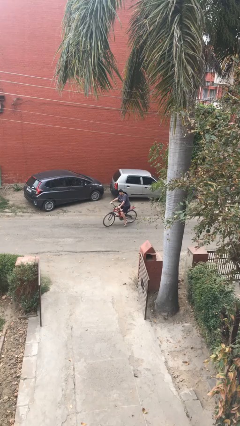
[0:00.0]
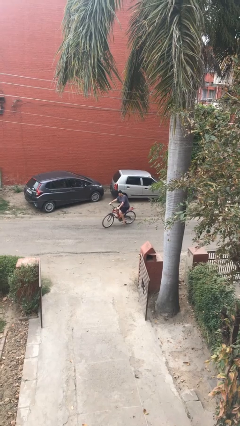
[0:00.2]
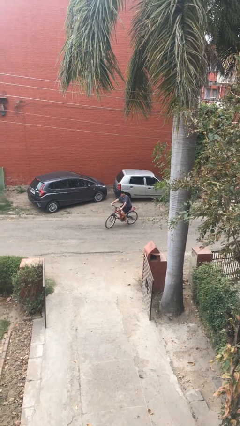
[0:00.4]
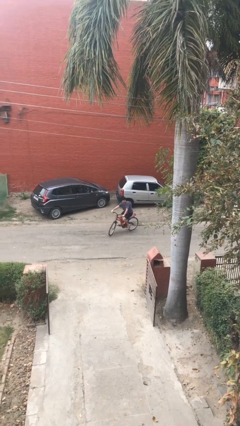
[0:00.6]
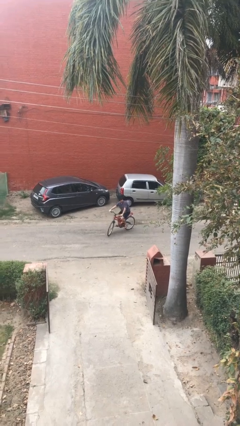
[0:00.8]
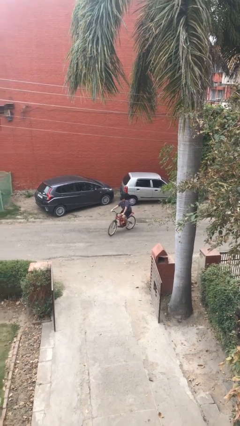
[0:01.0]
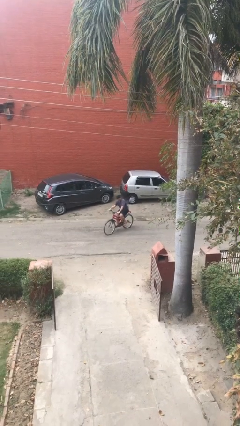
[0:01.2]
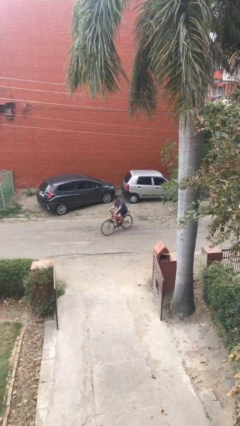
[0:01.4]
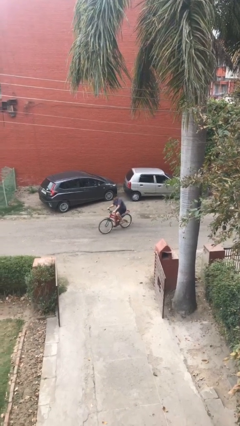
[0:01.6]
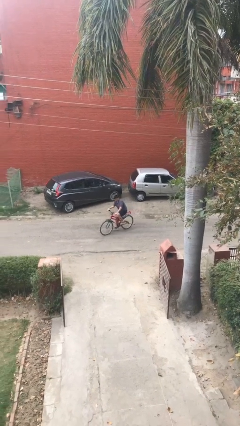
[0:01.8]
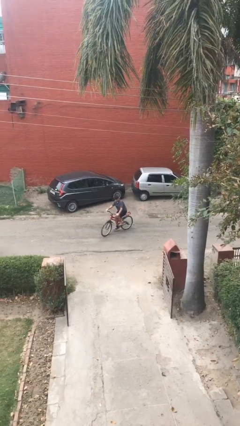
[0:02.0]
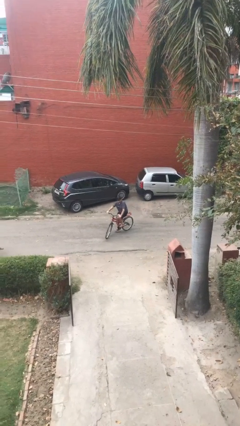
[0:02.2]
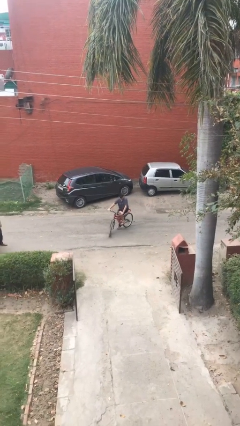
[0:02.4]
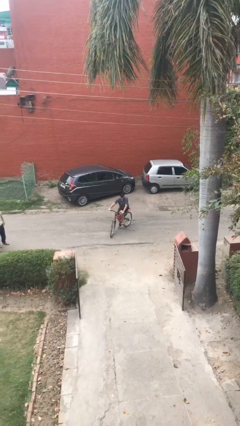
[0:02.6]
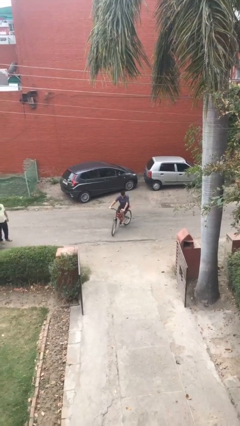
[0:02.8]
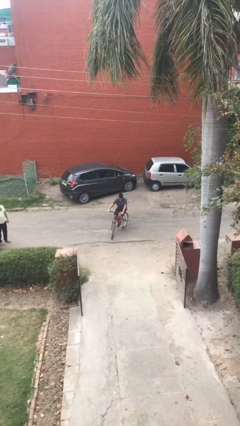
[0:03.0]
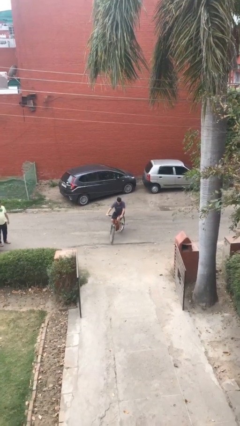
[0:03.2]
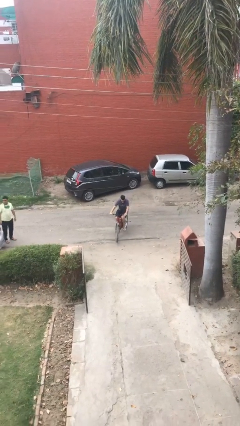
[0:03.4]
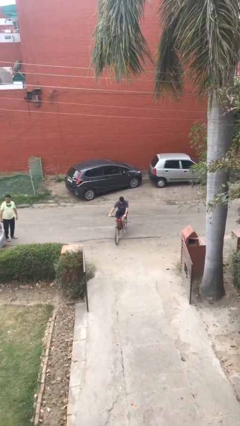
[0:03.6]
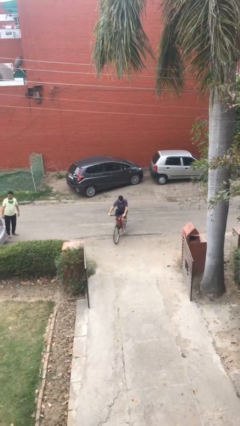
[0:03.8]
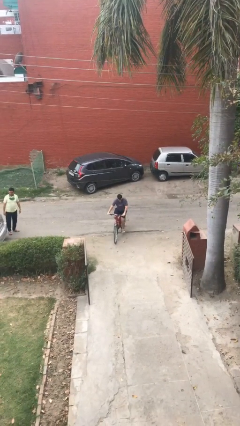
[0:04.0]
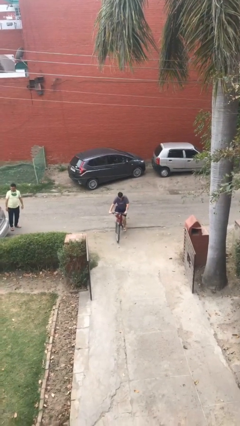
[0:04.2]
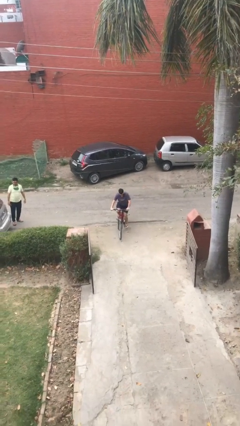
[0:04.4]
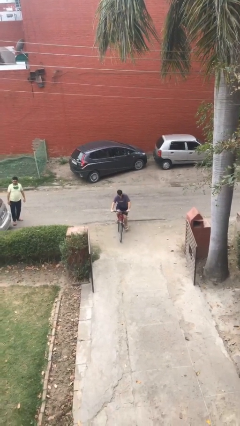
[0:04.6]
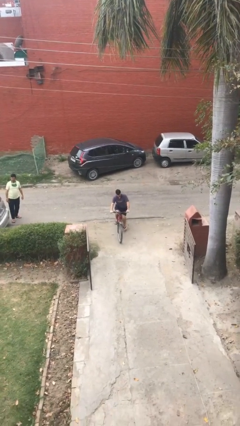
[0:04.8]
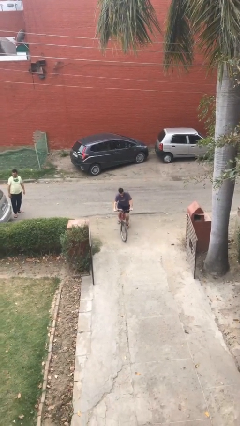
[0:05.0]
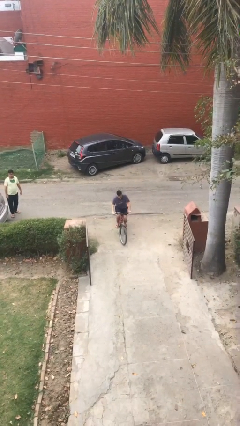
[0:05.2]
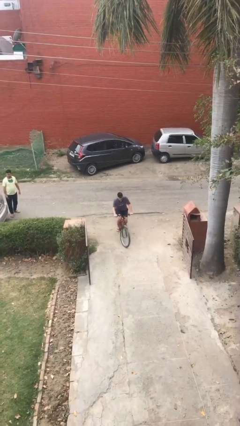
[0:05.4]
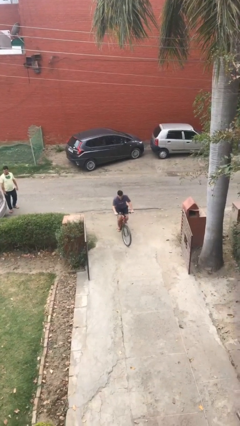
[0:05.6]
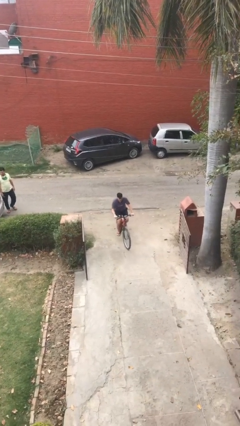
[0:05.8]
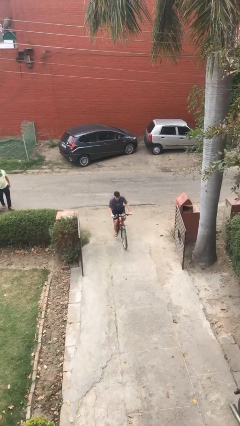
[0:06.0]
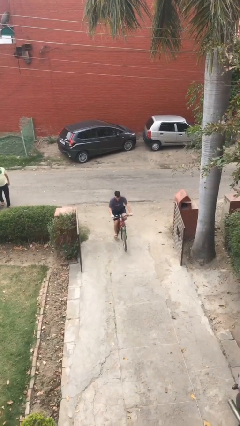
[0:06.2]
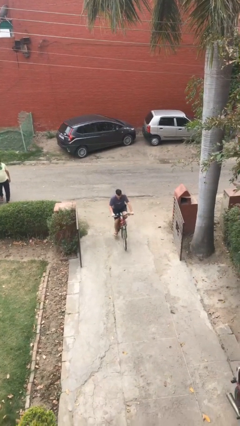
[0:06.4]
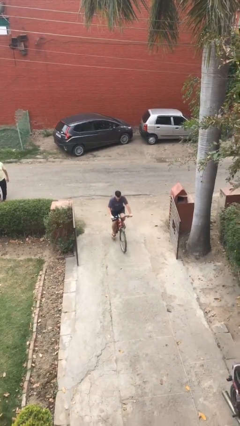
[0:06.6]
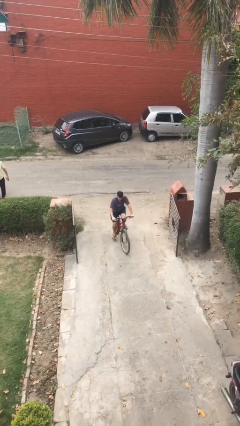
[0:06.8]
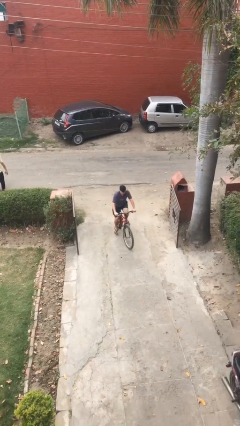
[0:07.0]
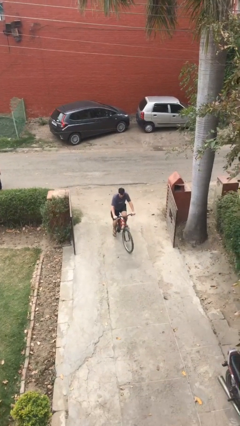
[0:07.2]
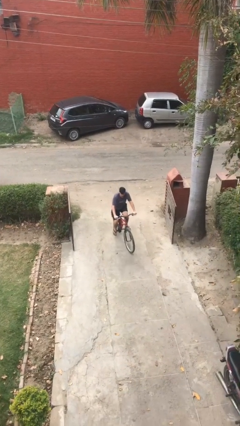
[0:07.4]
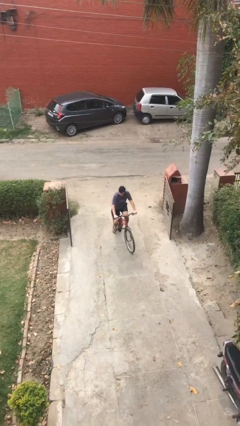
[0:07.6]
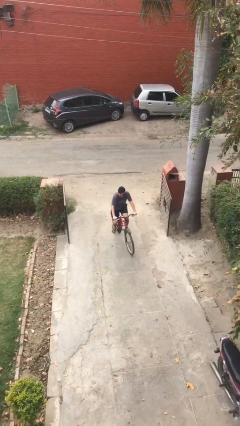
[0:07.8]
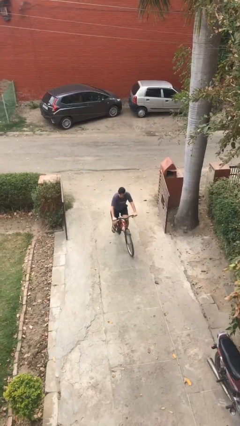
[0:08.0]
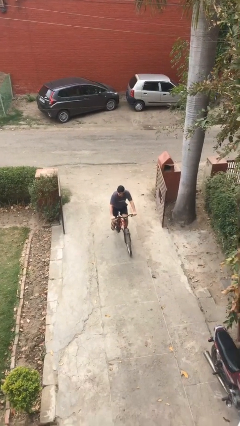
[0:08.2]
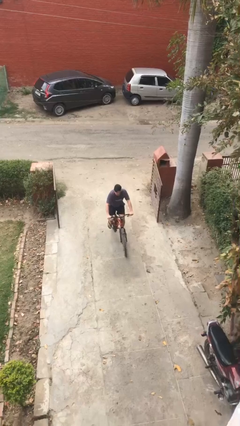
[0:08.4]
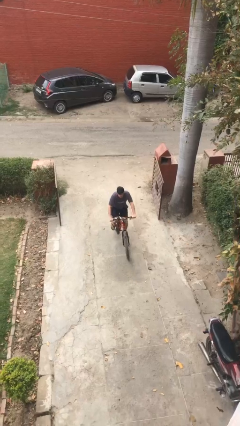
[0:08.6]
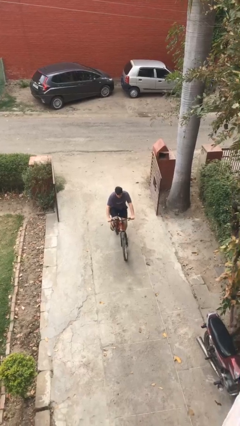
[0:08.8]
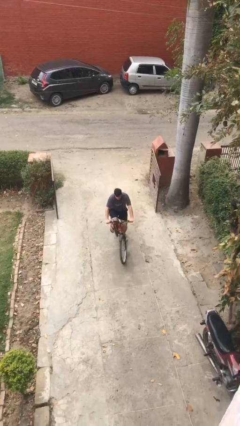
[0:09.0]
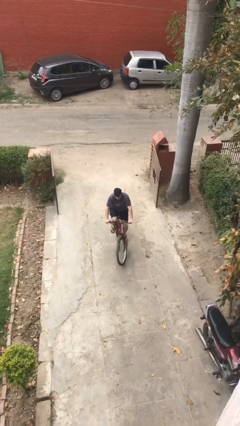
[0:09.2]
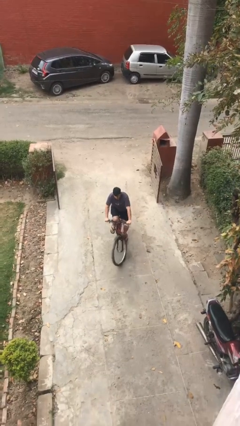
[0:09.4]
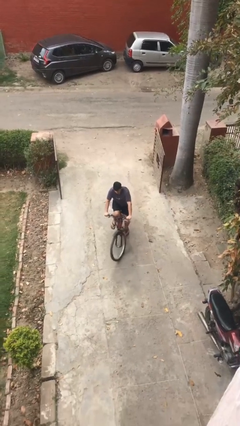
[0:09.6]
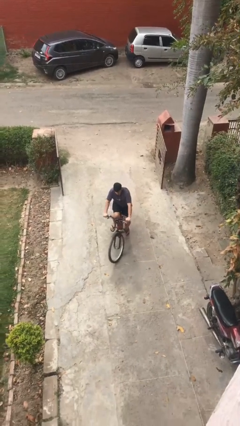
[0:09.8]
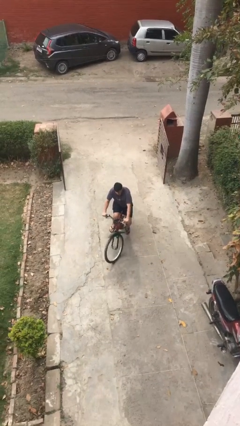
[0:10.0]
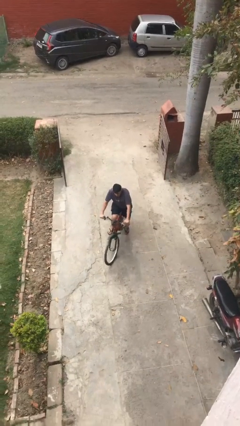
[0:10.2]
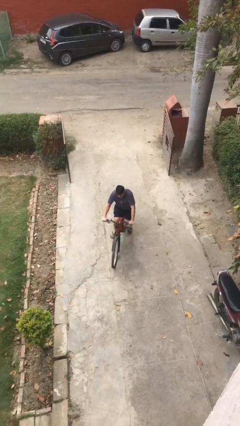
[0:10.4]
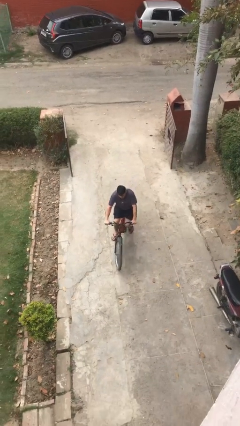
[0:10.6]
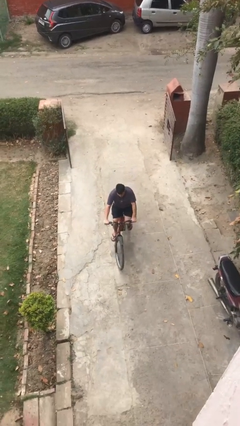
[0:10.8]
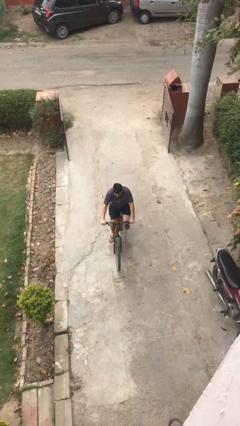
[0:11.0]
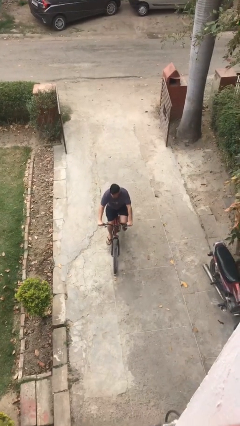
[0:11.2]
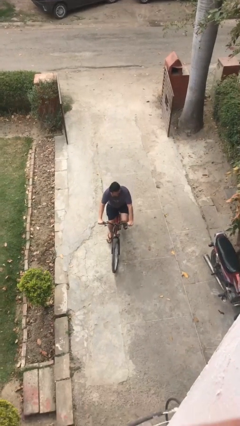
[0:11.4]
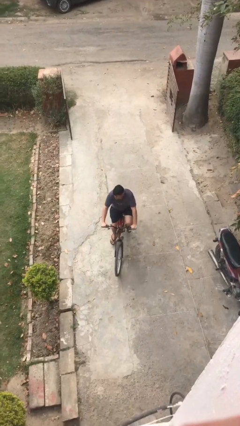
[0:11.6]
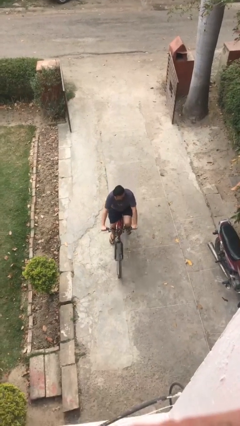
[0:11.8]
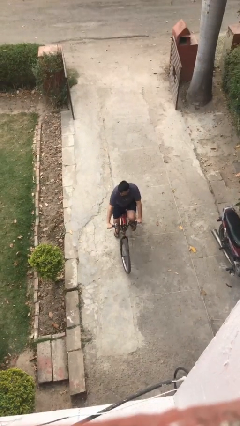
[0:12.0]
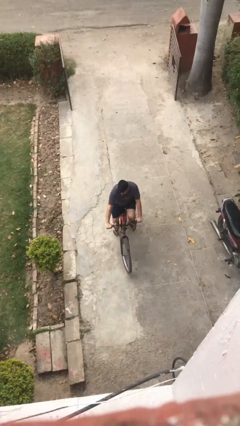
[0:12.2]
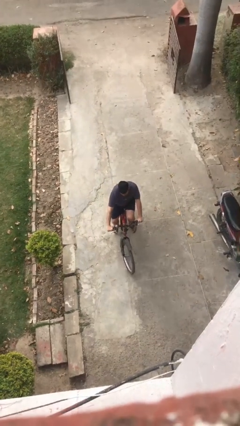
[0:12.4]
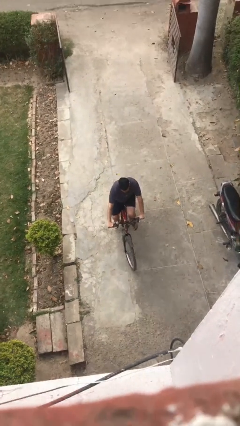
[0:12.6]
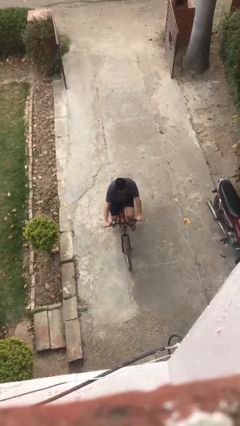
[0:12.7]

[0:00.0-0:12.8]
person rides bicycle

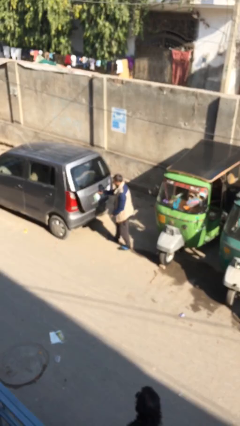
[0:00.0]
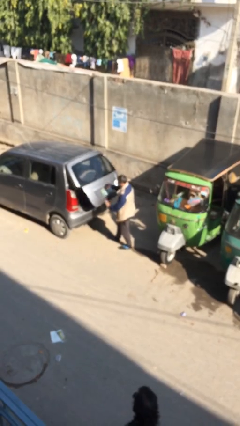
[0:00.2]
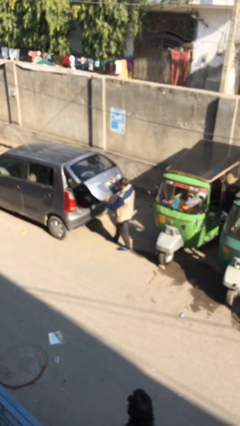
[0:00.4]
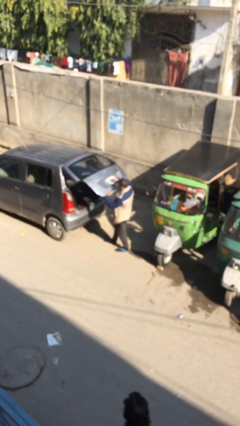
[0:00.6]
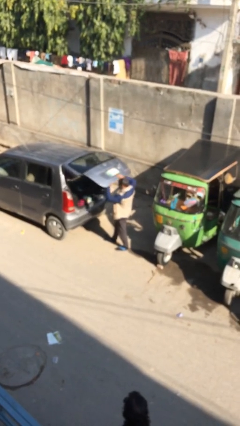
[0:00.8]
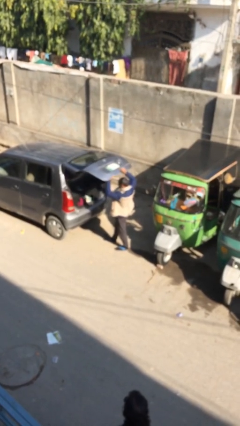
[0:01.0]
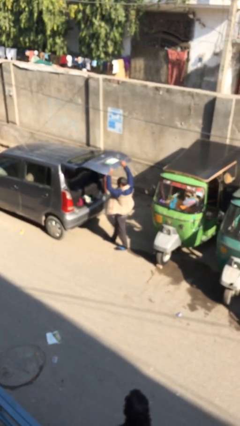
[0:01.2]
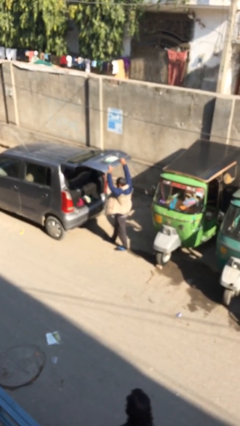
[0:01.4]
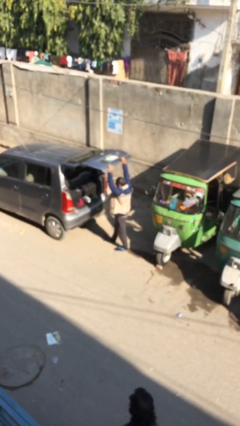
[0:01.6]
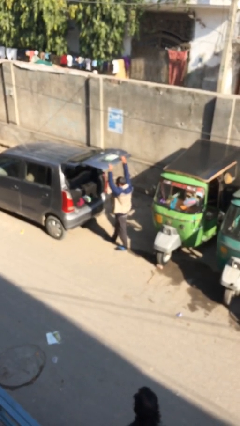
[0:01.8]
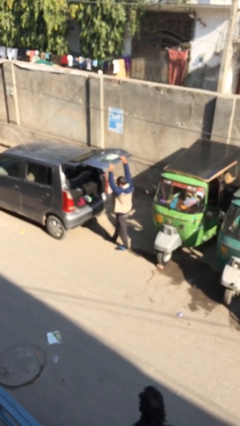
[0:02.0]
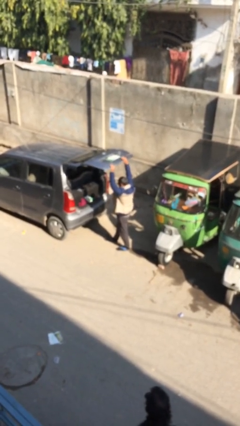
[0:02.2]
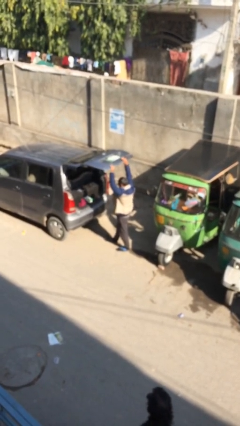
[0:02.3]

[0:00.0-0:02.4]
person opens car trunk

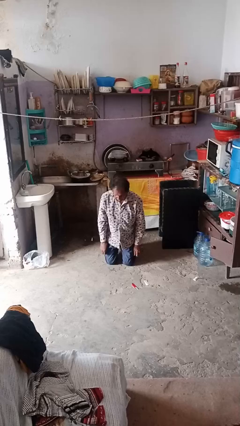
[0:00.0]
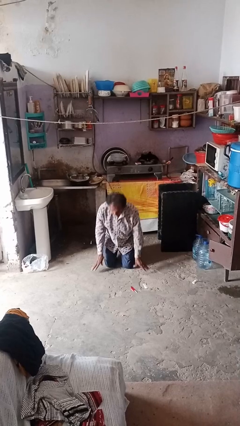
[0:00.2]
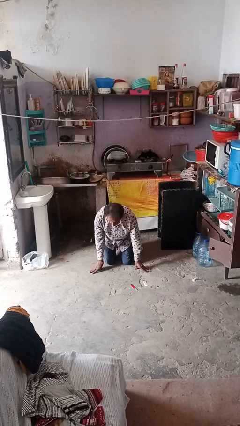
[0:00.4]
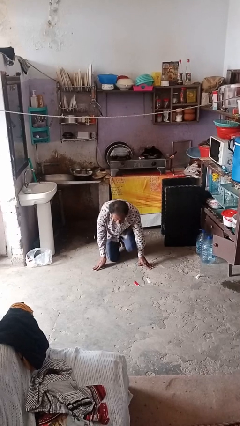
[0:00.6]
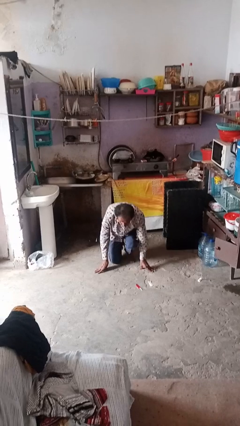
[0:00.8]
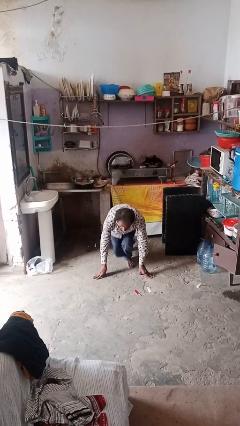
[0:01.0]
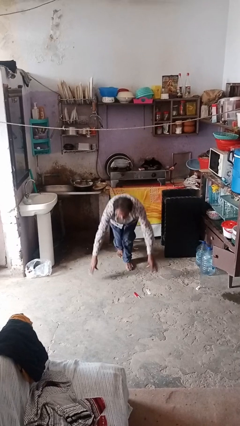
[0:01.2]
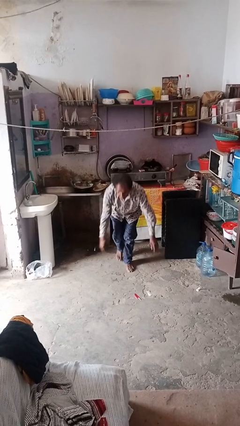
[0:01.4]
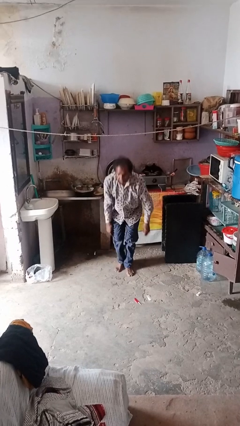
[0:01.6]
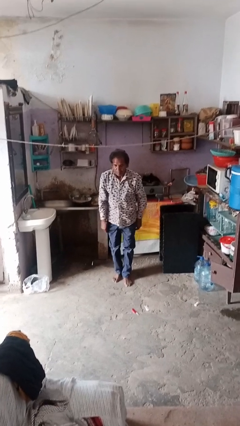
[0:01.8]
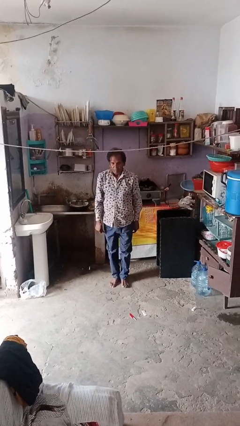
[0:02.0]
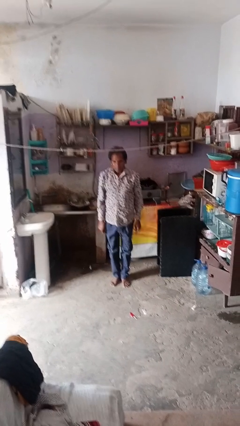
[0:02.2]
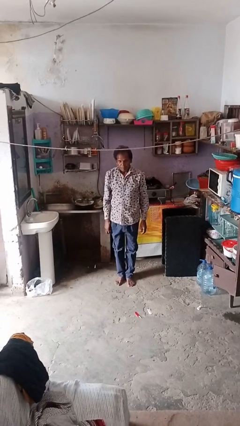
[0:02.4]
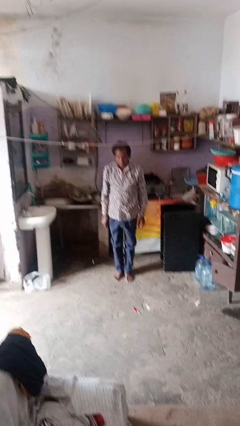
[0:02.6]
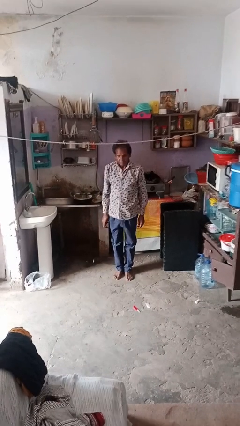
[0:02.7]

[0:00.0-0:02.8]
person stands up from floor

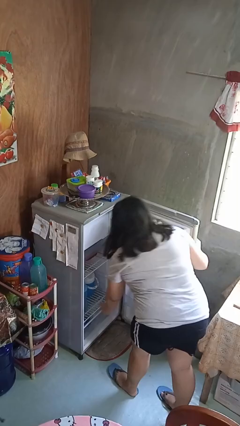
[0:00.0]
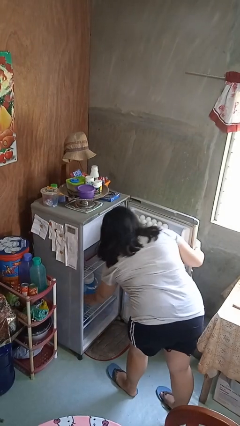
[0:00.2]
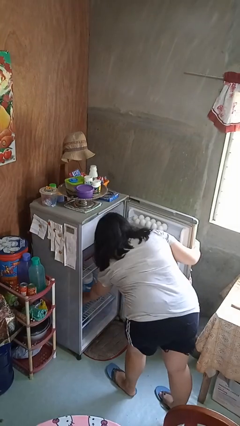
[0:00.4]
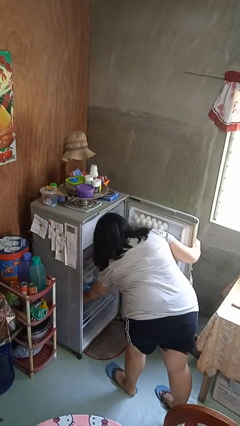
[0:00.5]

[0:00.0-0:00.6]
person takes object from refrigerator
